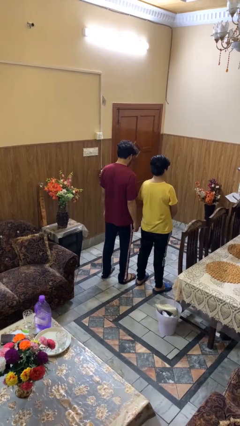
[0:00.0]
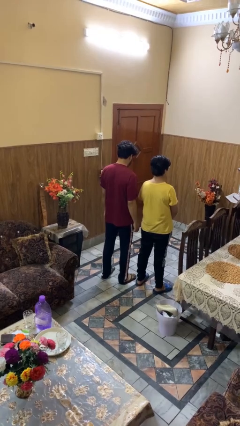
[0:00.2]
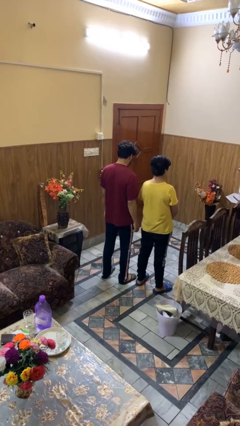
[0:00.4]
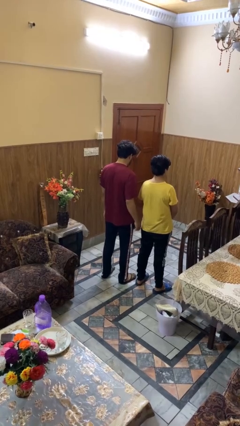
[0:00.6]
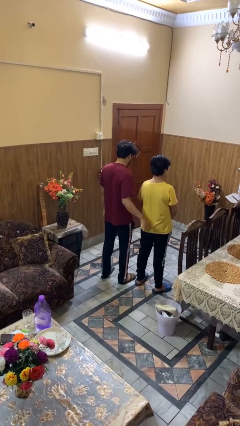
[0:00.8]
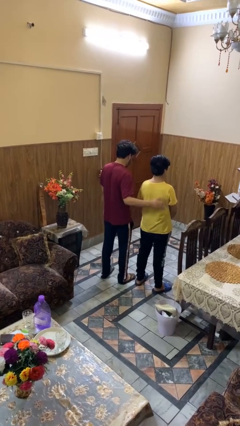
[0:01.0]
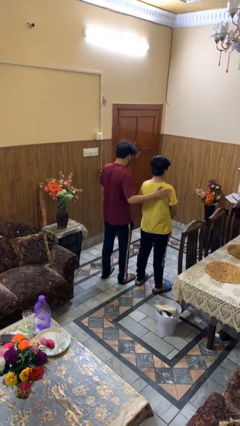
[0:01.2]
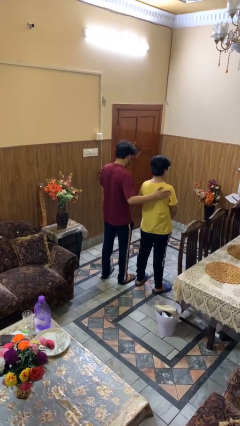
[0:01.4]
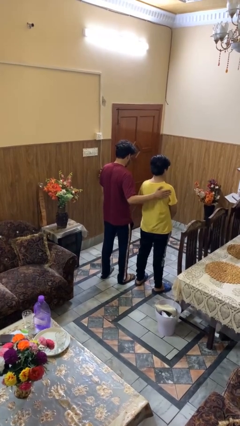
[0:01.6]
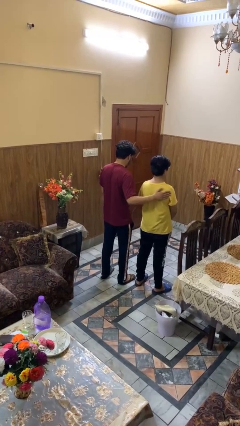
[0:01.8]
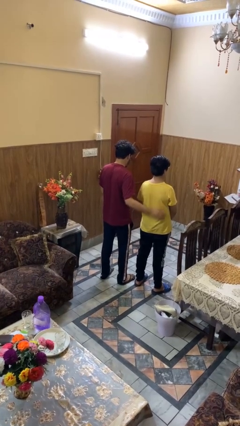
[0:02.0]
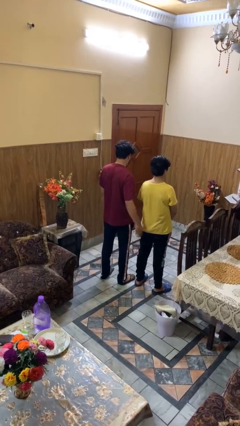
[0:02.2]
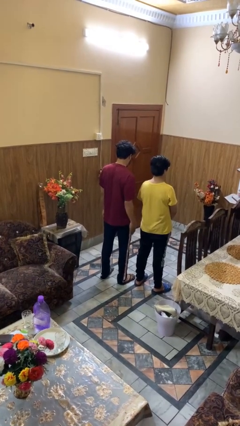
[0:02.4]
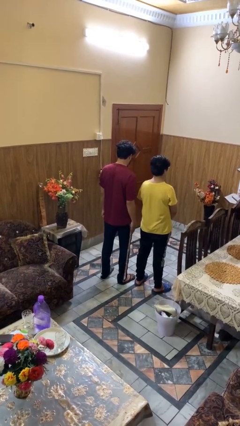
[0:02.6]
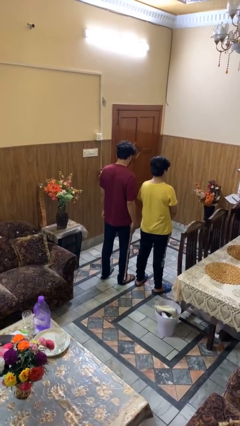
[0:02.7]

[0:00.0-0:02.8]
person touches back of person

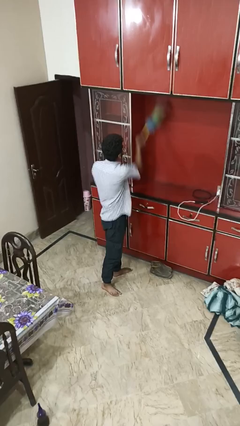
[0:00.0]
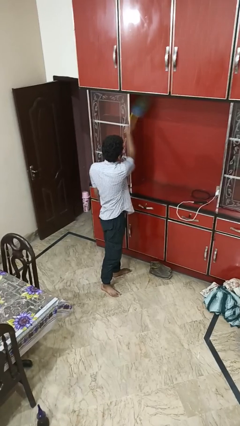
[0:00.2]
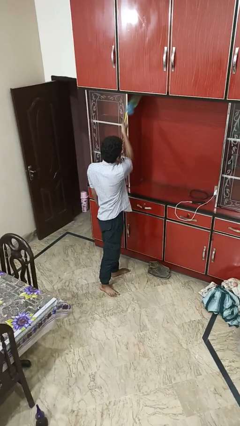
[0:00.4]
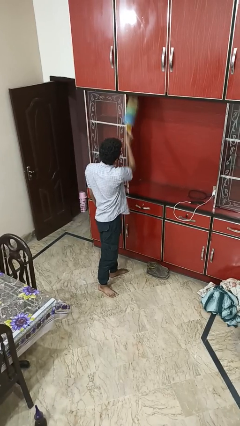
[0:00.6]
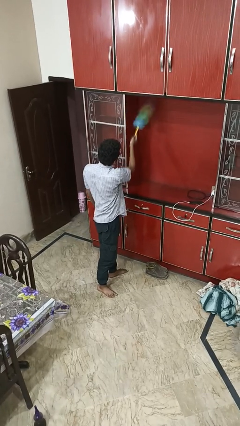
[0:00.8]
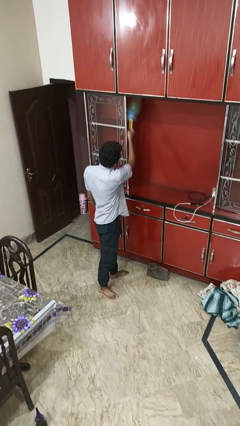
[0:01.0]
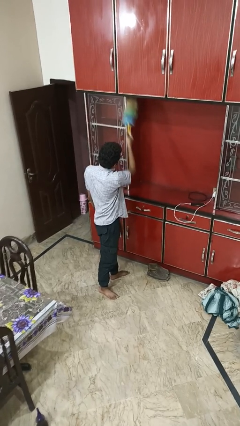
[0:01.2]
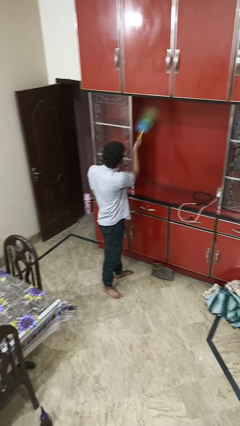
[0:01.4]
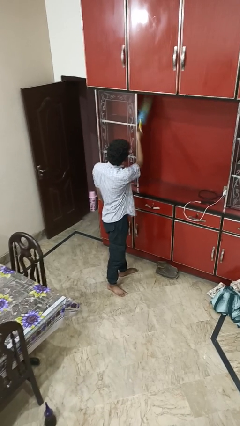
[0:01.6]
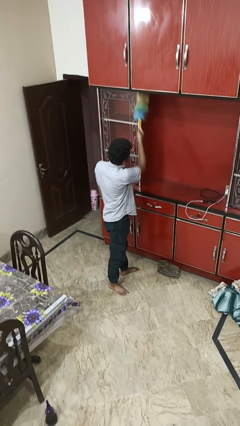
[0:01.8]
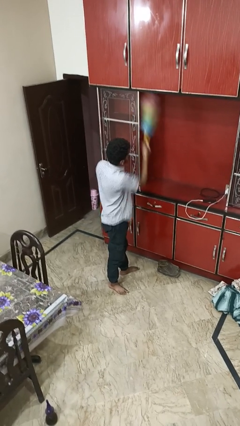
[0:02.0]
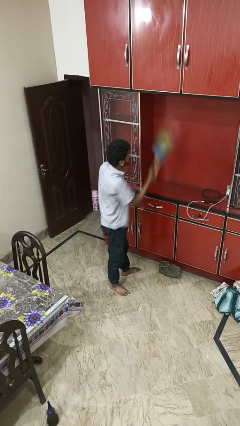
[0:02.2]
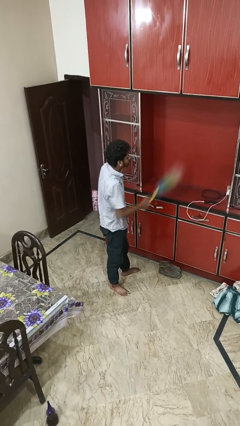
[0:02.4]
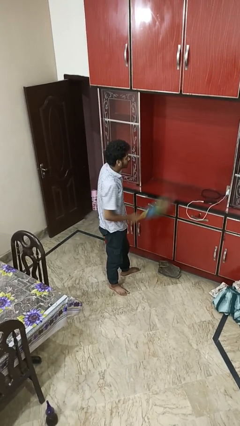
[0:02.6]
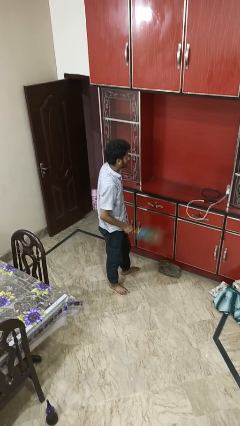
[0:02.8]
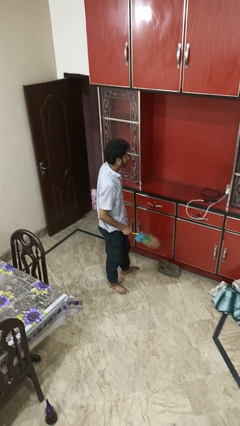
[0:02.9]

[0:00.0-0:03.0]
person dusts furniture

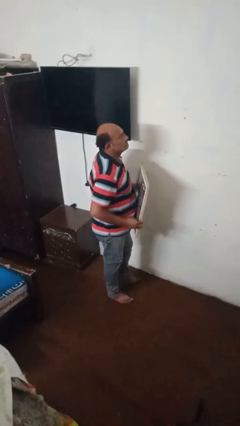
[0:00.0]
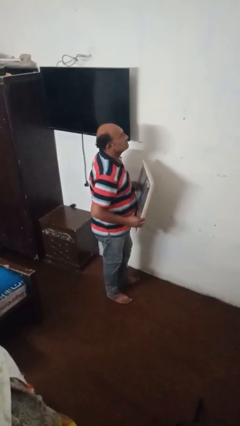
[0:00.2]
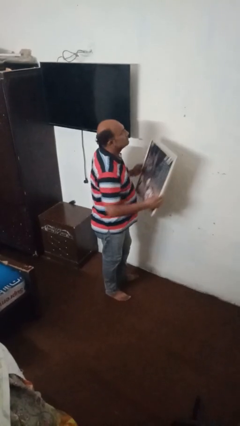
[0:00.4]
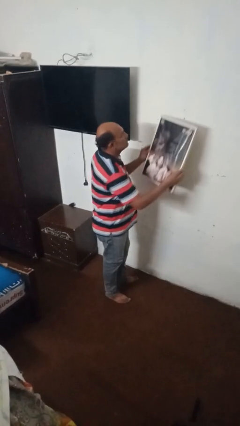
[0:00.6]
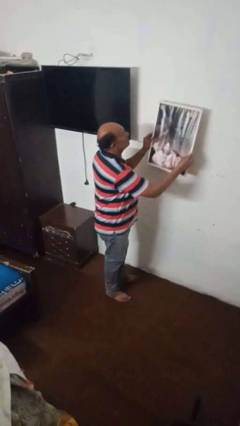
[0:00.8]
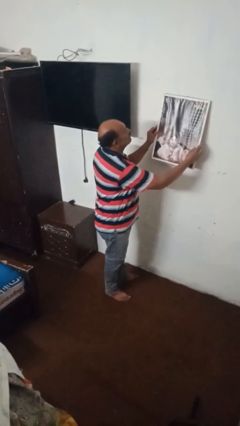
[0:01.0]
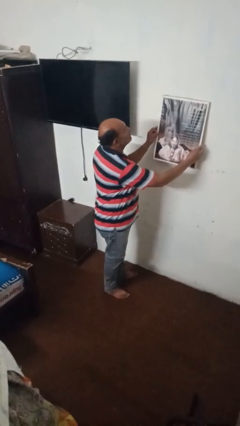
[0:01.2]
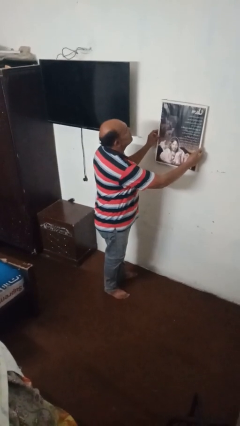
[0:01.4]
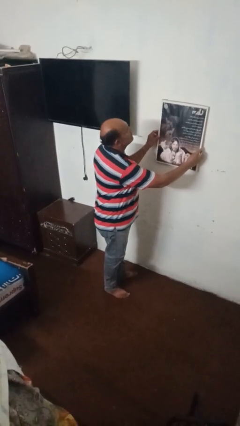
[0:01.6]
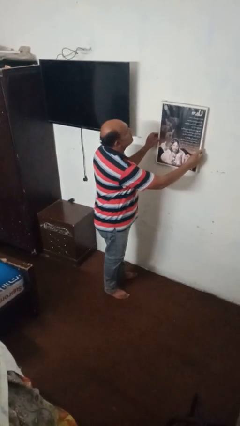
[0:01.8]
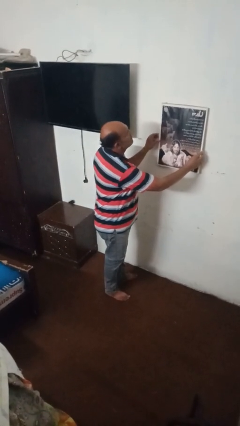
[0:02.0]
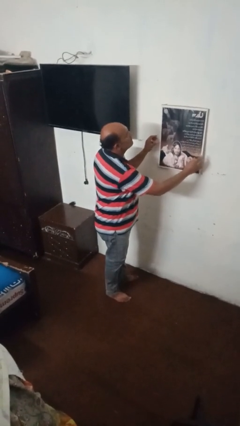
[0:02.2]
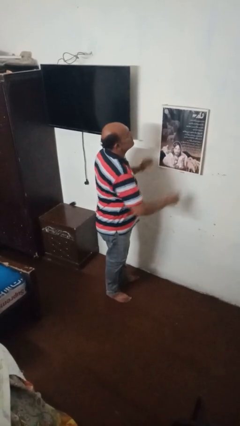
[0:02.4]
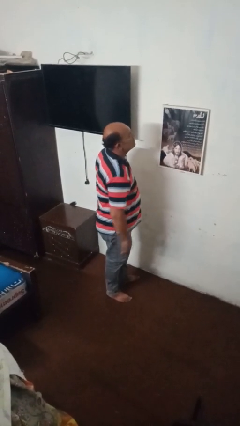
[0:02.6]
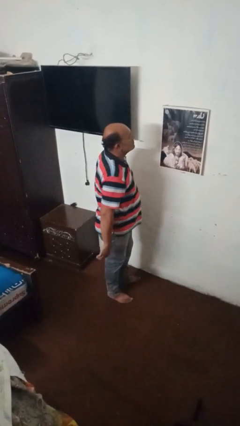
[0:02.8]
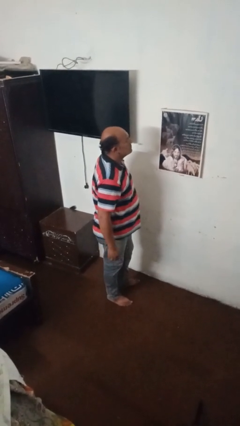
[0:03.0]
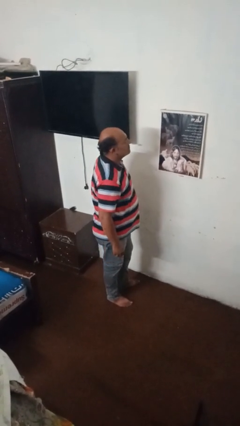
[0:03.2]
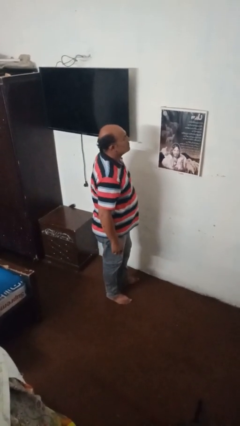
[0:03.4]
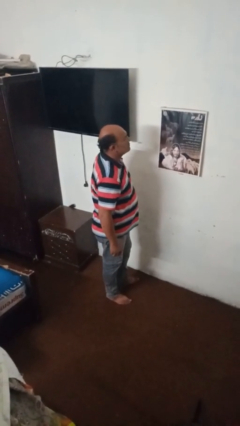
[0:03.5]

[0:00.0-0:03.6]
person puts up picture frame

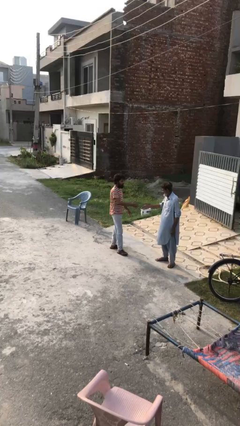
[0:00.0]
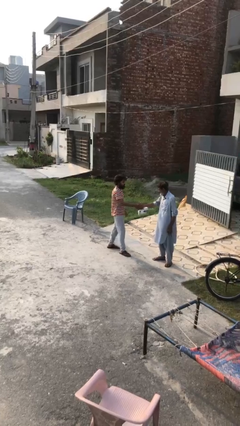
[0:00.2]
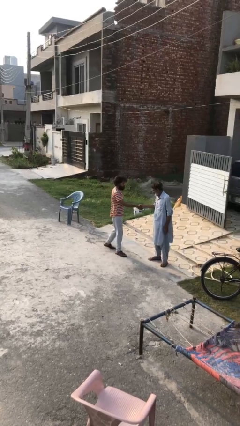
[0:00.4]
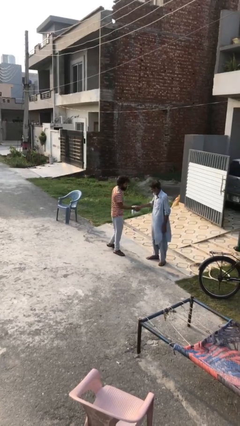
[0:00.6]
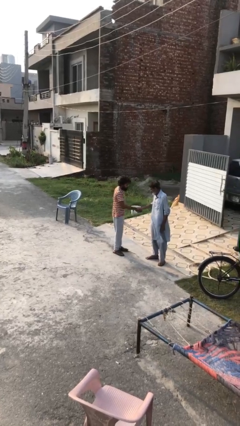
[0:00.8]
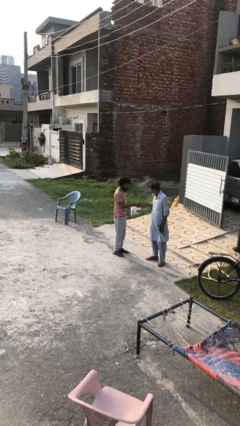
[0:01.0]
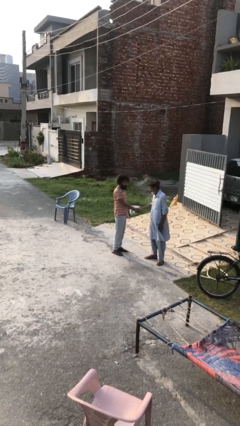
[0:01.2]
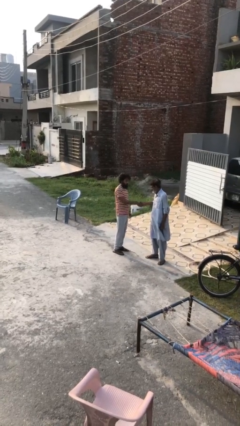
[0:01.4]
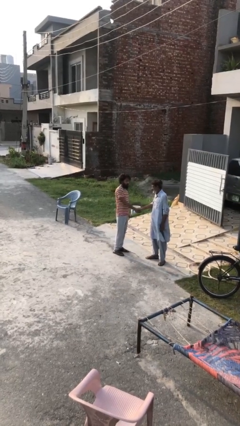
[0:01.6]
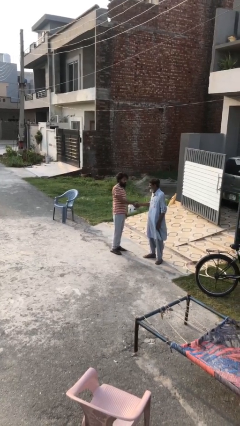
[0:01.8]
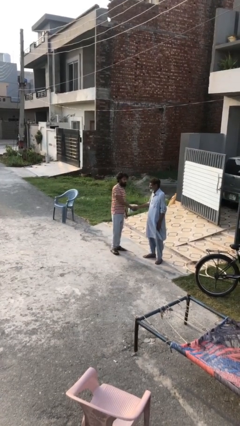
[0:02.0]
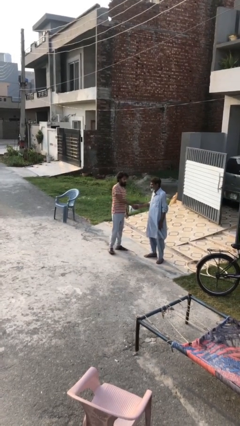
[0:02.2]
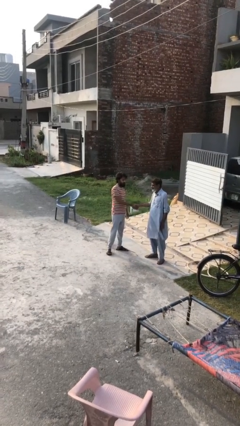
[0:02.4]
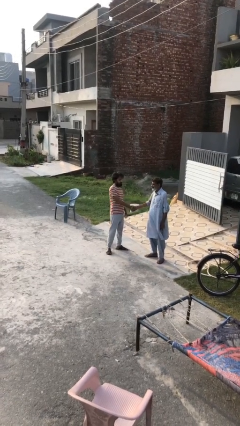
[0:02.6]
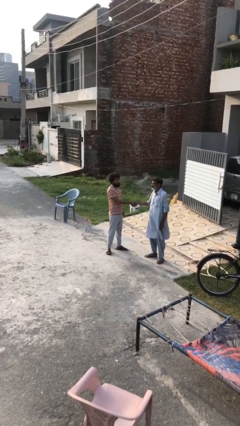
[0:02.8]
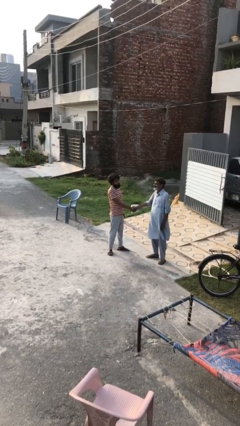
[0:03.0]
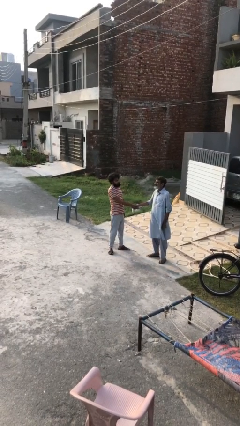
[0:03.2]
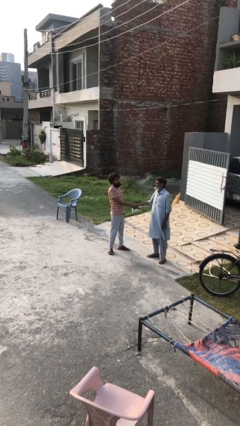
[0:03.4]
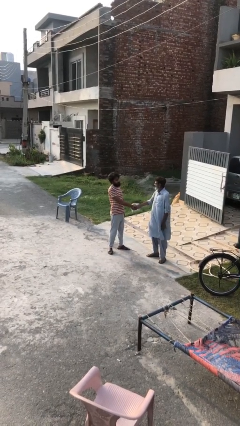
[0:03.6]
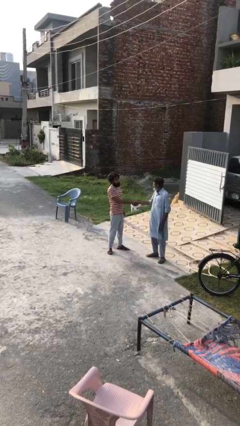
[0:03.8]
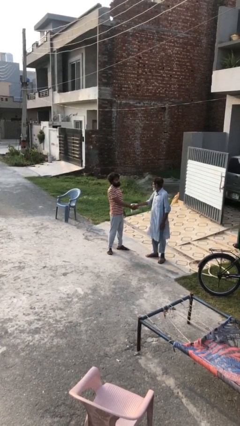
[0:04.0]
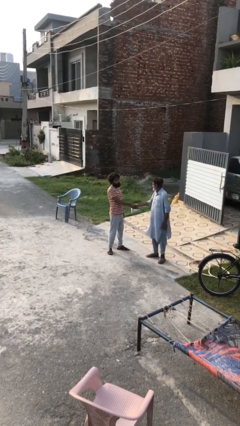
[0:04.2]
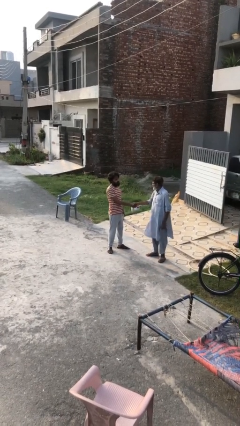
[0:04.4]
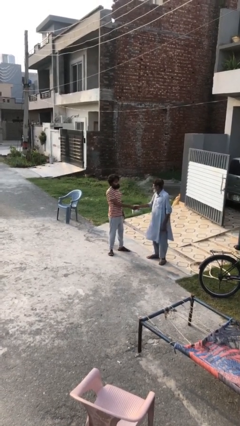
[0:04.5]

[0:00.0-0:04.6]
person shakes hand

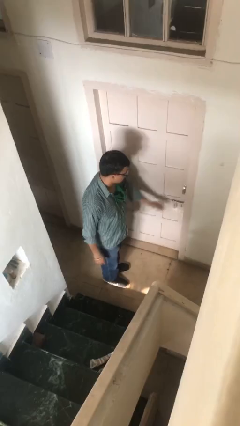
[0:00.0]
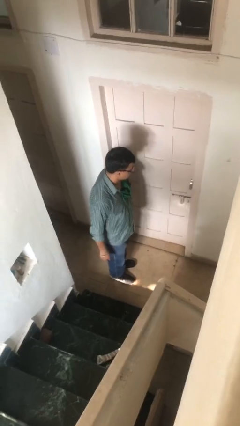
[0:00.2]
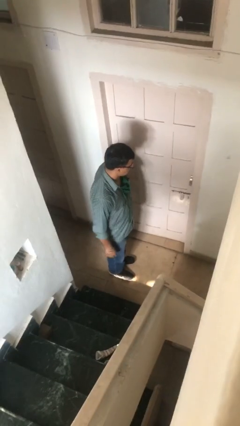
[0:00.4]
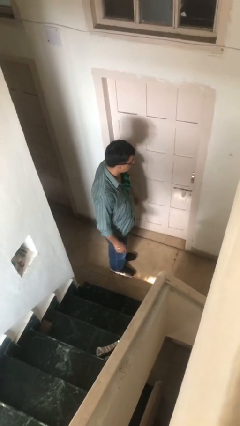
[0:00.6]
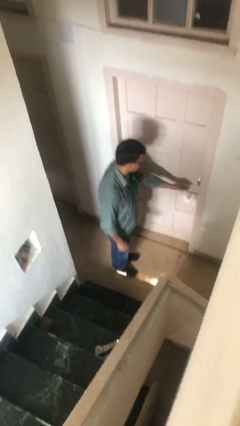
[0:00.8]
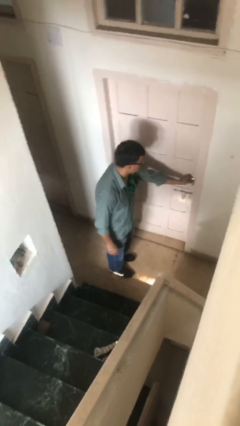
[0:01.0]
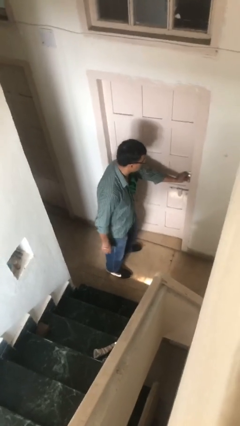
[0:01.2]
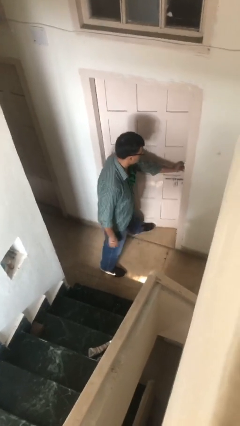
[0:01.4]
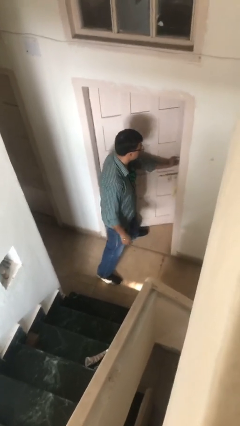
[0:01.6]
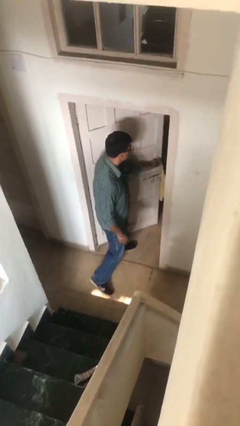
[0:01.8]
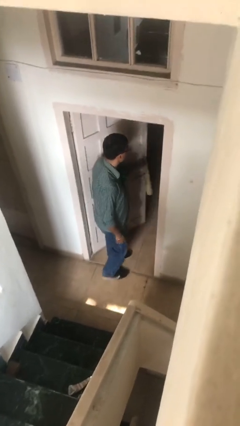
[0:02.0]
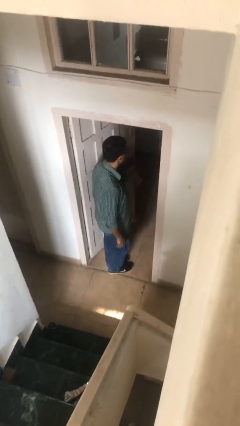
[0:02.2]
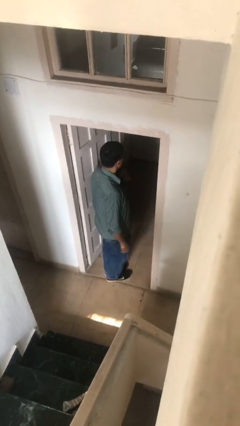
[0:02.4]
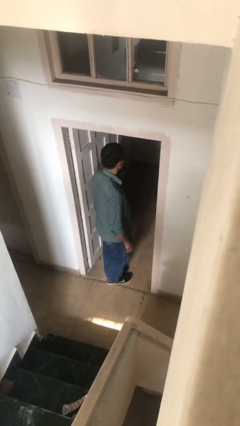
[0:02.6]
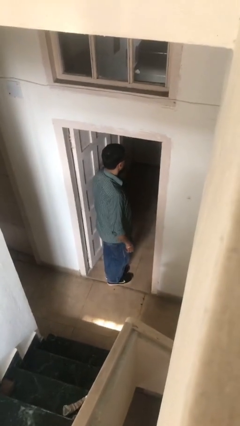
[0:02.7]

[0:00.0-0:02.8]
person opens facility door

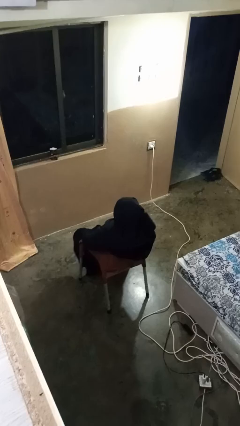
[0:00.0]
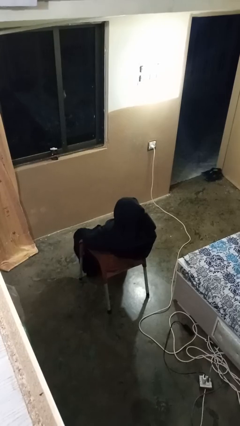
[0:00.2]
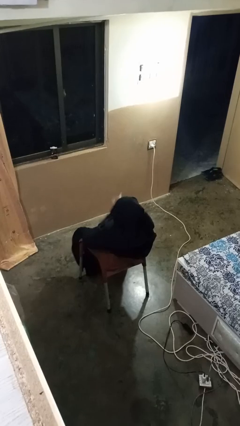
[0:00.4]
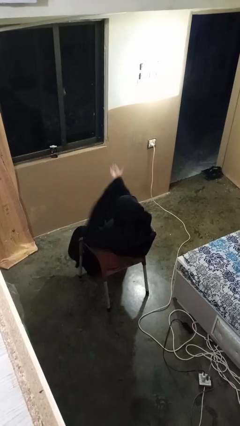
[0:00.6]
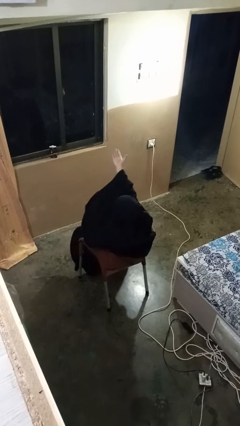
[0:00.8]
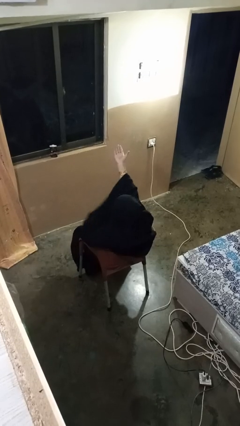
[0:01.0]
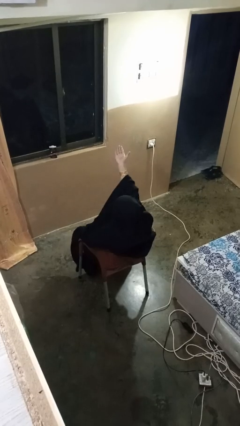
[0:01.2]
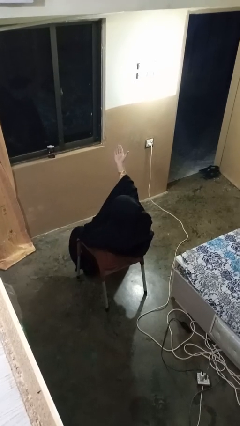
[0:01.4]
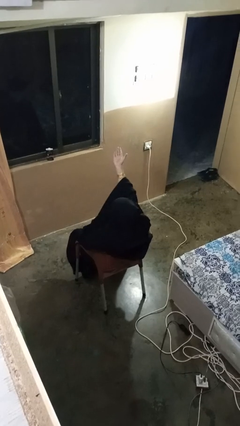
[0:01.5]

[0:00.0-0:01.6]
person gestures swipe up
